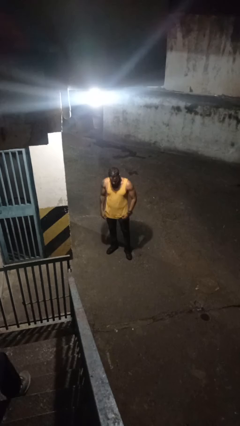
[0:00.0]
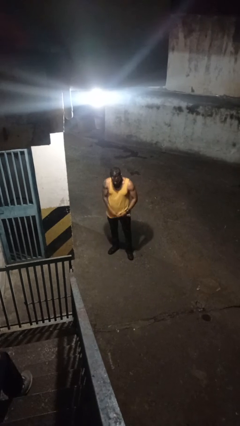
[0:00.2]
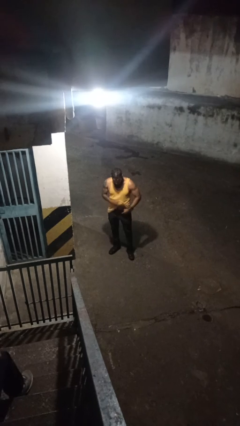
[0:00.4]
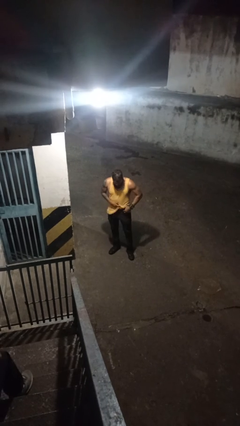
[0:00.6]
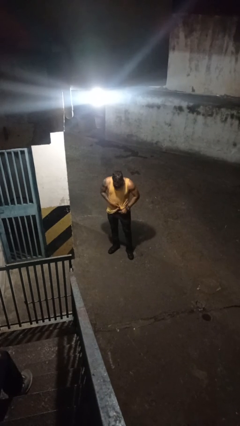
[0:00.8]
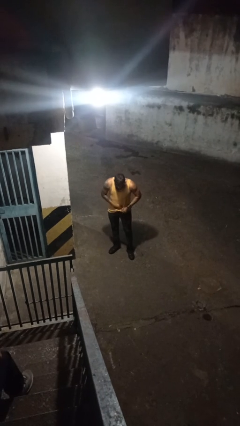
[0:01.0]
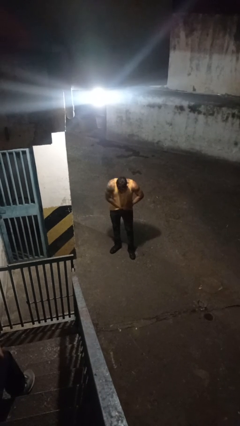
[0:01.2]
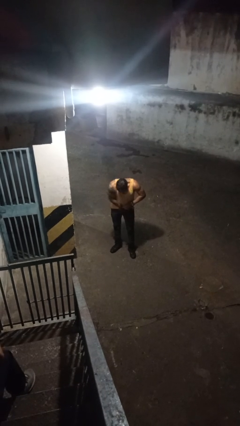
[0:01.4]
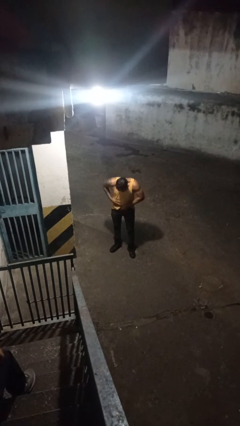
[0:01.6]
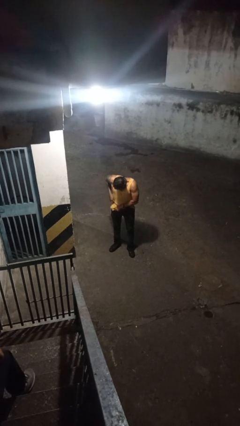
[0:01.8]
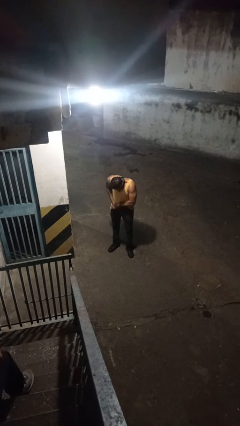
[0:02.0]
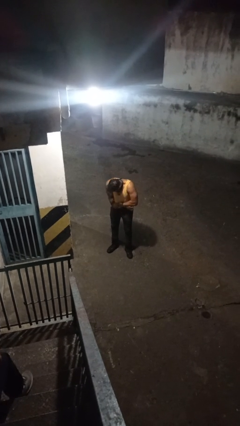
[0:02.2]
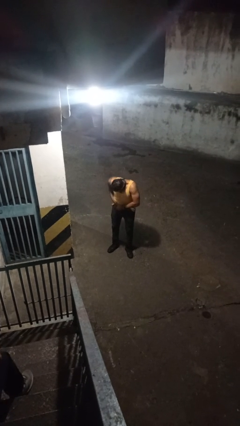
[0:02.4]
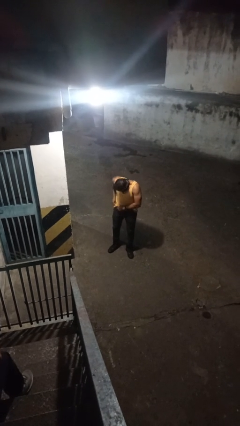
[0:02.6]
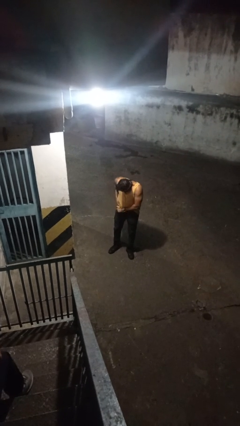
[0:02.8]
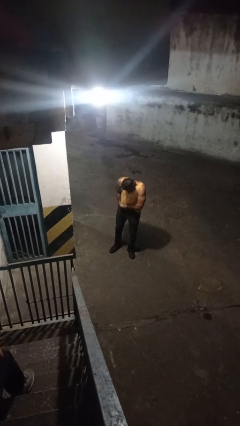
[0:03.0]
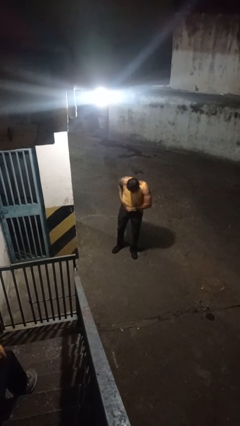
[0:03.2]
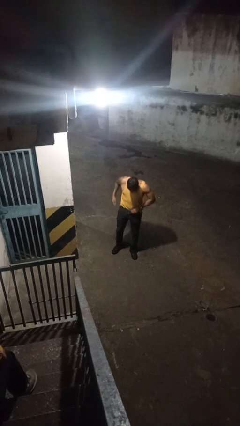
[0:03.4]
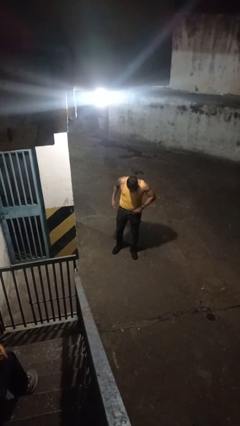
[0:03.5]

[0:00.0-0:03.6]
person tucks in shirt

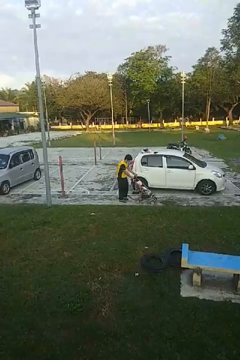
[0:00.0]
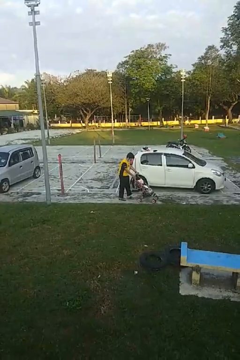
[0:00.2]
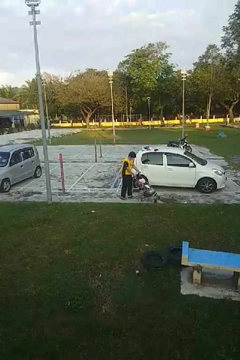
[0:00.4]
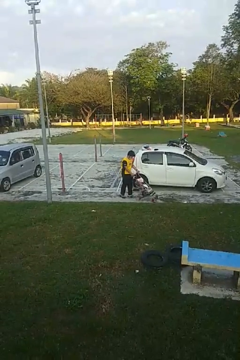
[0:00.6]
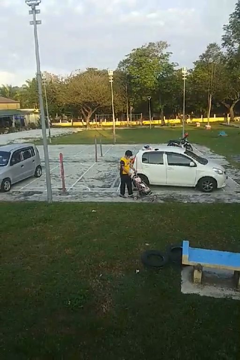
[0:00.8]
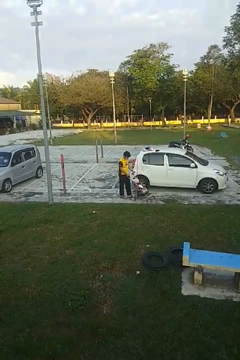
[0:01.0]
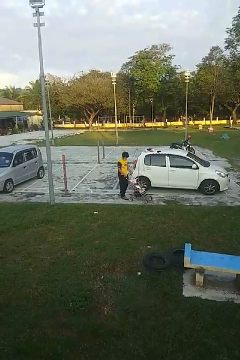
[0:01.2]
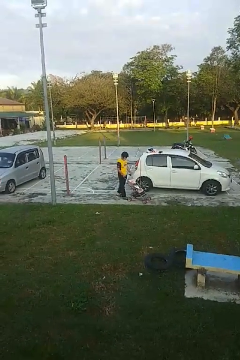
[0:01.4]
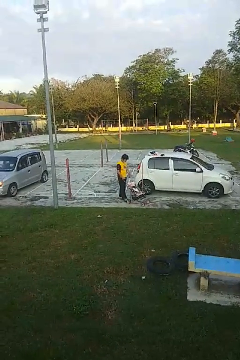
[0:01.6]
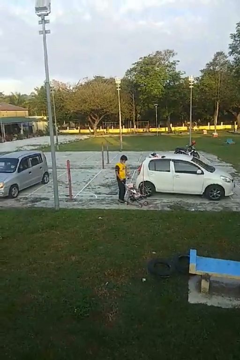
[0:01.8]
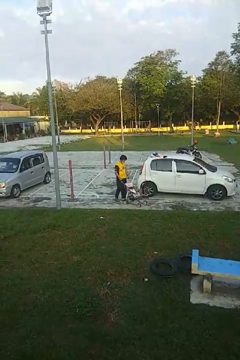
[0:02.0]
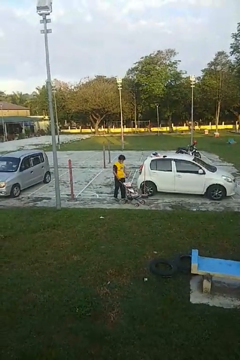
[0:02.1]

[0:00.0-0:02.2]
person pulls wheeled cart

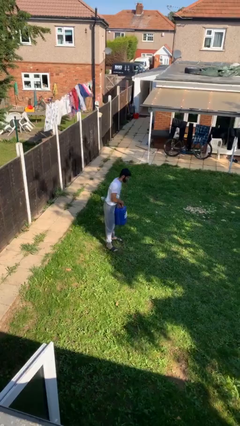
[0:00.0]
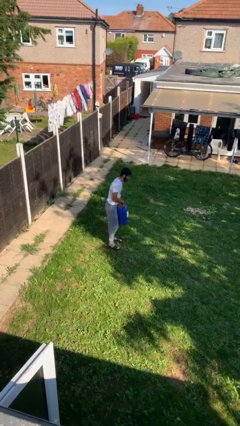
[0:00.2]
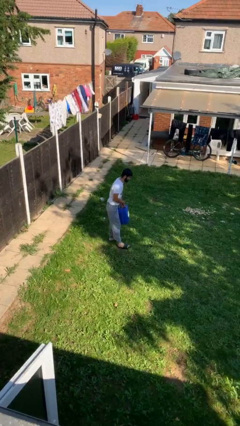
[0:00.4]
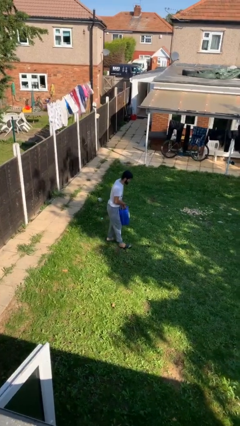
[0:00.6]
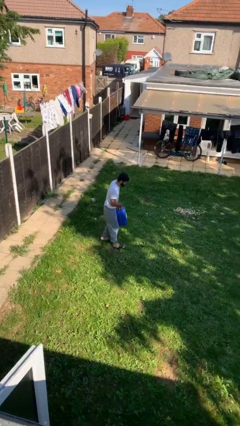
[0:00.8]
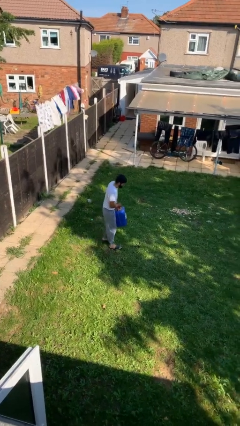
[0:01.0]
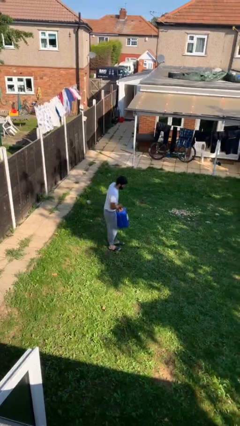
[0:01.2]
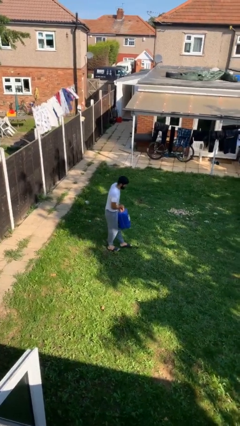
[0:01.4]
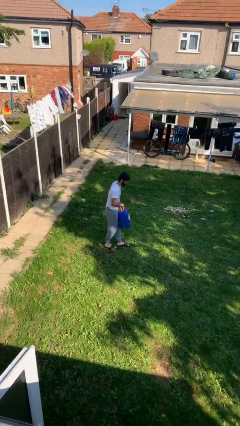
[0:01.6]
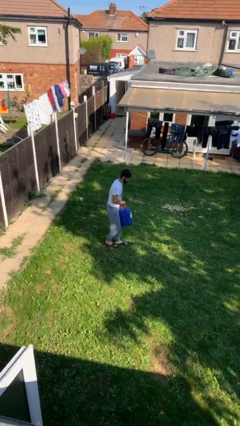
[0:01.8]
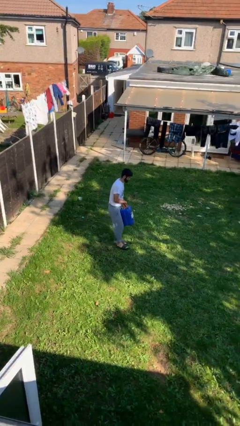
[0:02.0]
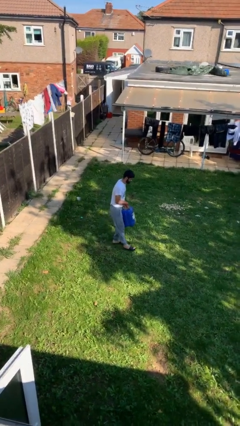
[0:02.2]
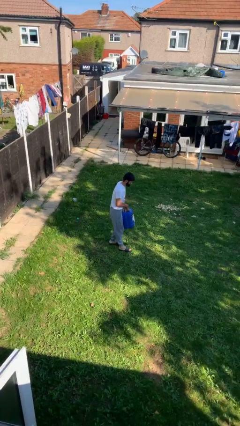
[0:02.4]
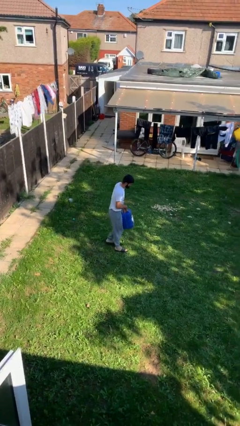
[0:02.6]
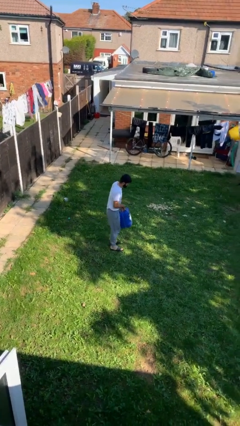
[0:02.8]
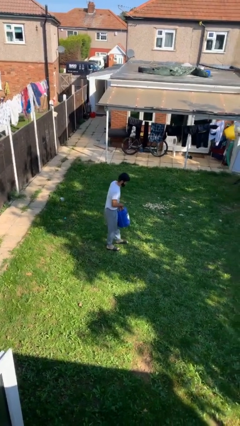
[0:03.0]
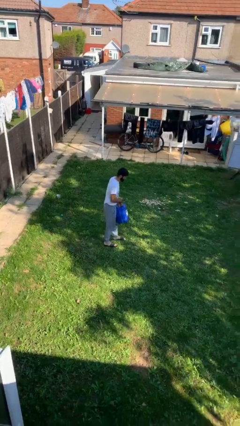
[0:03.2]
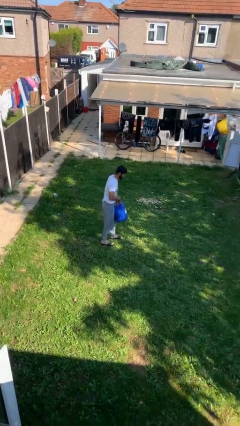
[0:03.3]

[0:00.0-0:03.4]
person carries heavy object

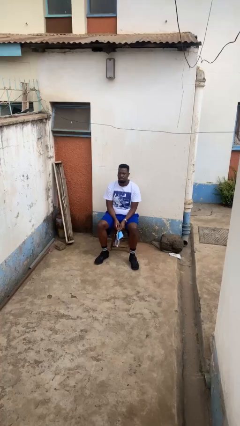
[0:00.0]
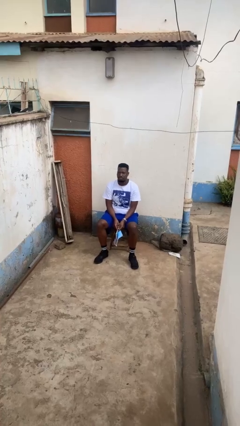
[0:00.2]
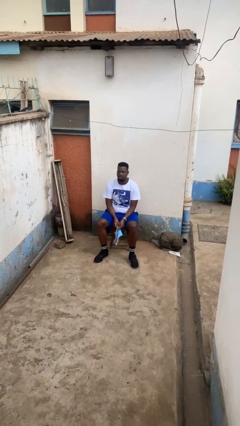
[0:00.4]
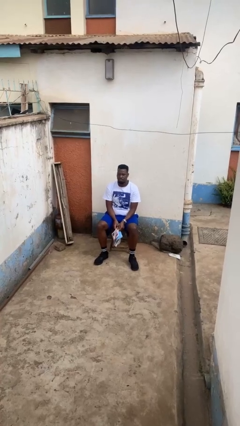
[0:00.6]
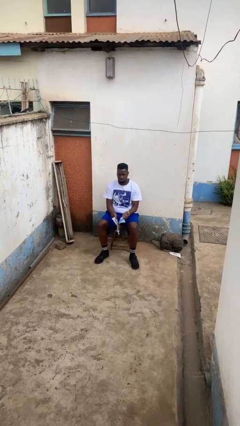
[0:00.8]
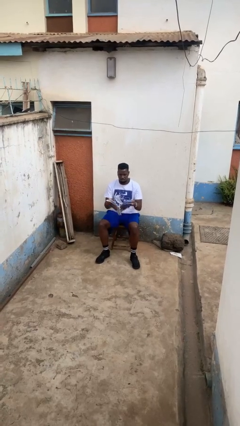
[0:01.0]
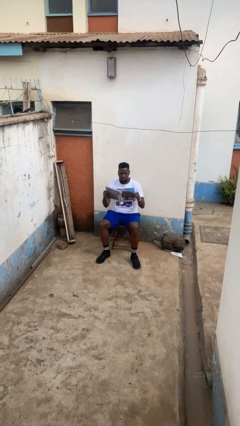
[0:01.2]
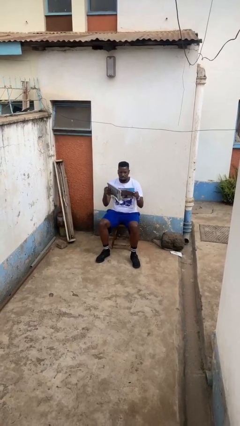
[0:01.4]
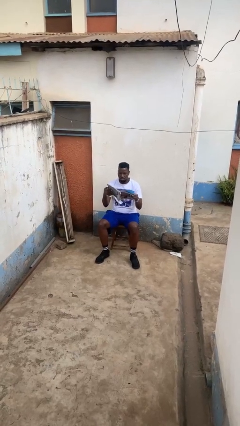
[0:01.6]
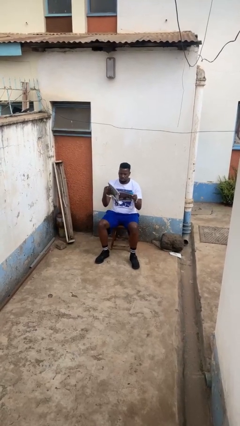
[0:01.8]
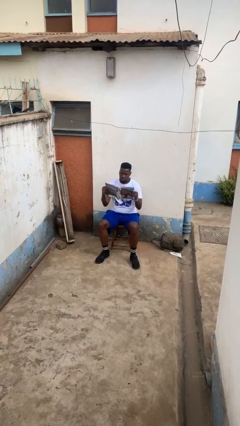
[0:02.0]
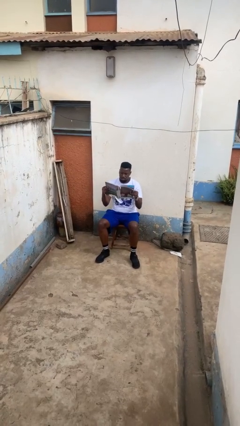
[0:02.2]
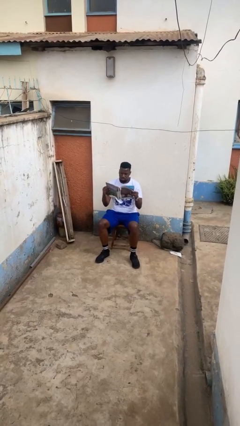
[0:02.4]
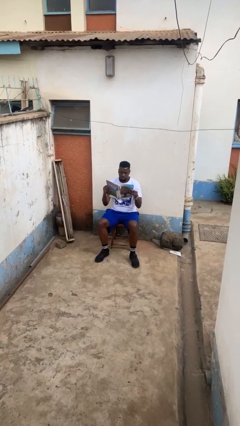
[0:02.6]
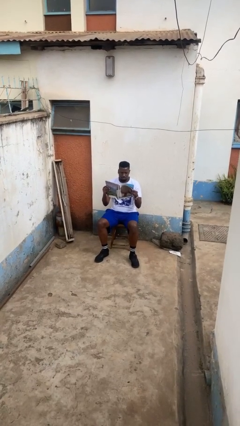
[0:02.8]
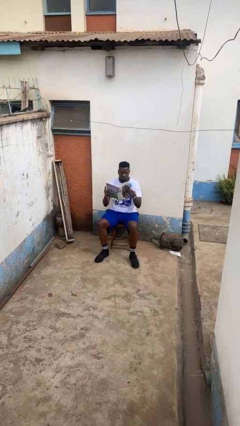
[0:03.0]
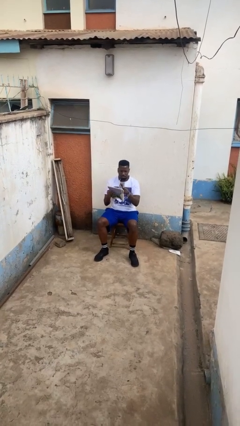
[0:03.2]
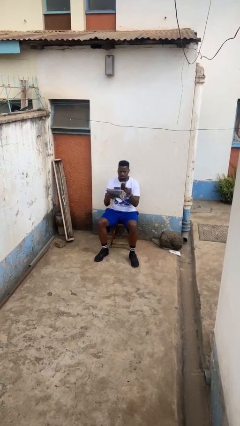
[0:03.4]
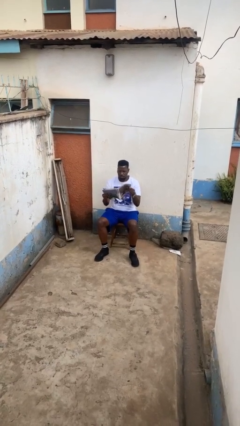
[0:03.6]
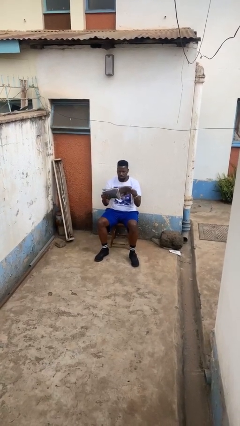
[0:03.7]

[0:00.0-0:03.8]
person reads magazine

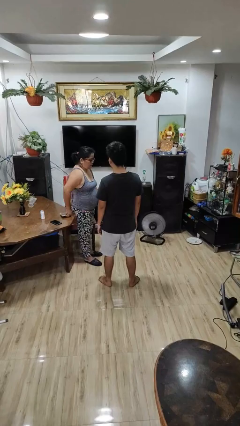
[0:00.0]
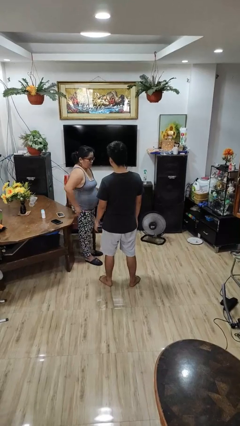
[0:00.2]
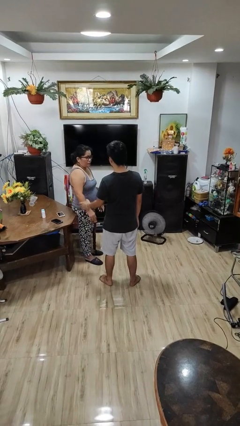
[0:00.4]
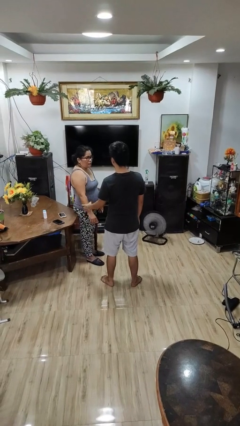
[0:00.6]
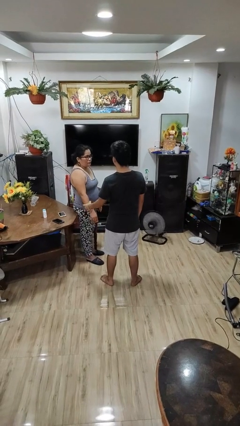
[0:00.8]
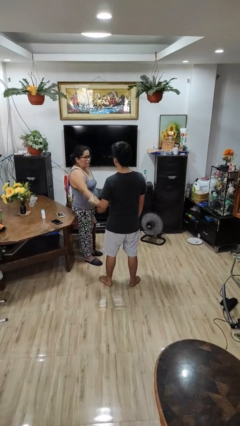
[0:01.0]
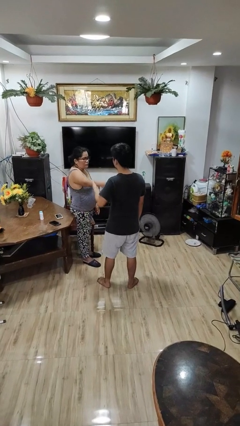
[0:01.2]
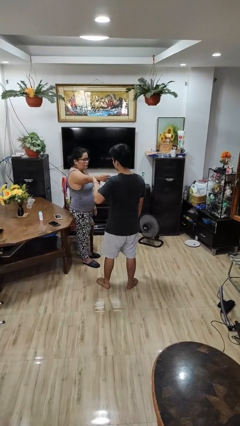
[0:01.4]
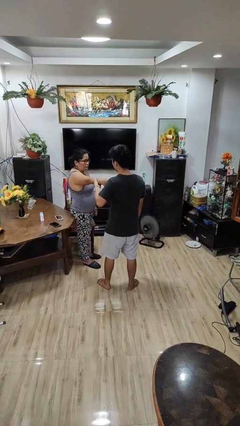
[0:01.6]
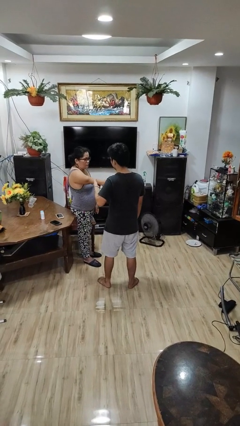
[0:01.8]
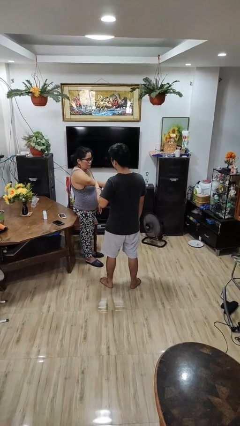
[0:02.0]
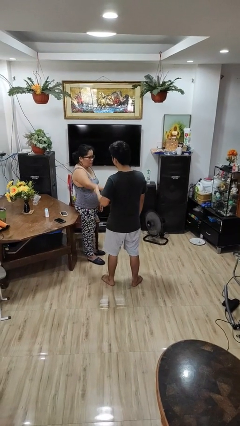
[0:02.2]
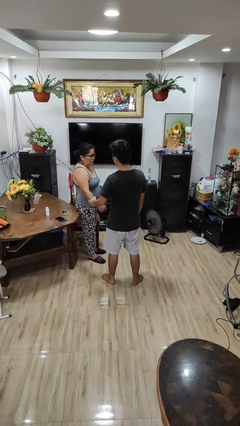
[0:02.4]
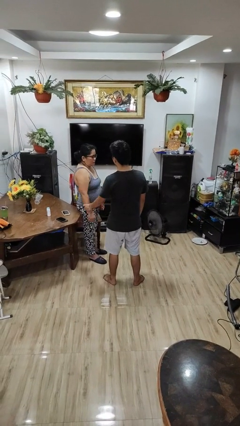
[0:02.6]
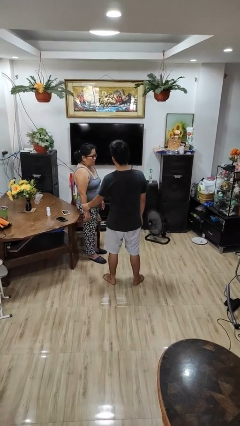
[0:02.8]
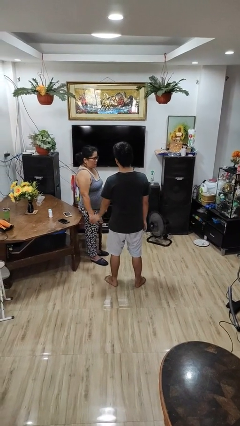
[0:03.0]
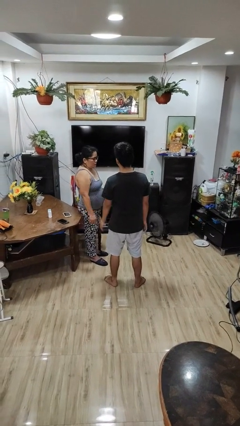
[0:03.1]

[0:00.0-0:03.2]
person grabs person by forearm

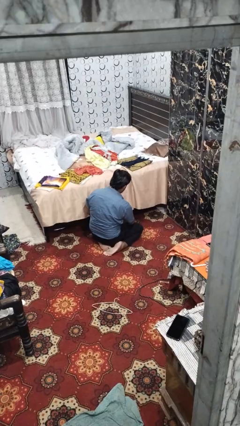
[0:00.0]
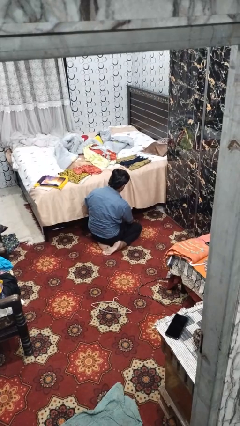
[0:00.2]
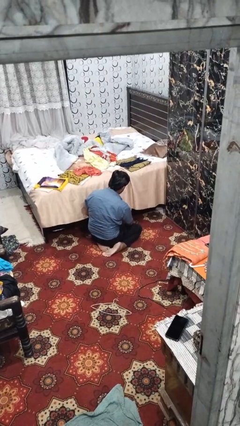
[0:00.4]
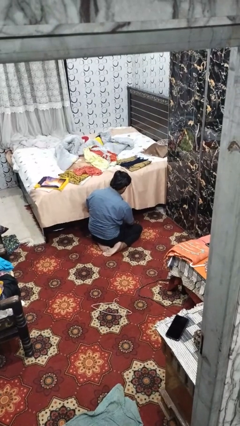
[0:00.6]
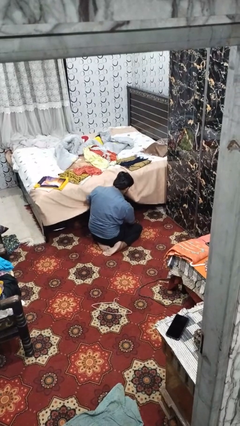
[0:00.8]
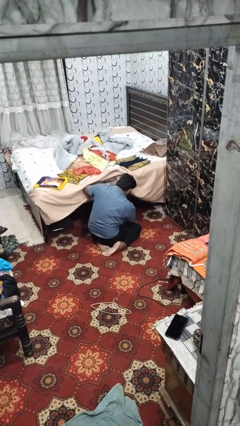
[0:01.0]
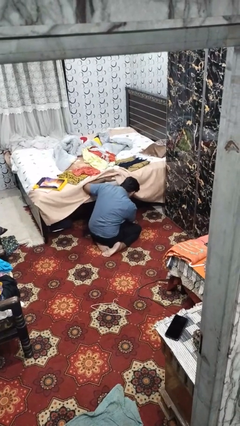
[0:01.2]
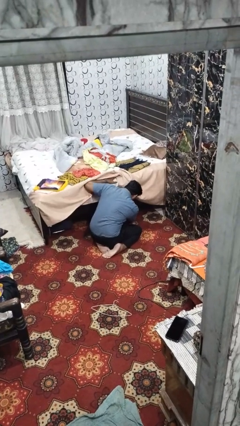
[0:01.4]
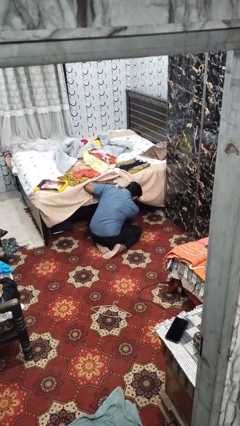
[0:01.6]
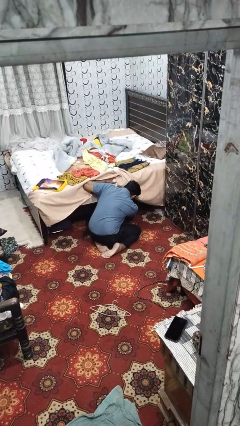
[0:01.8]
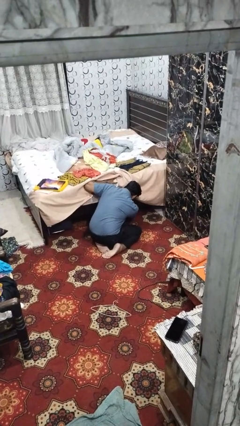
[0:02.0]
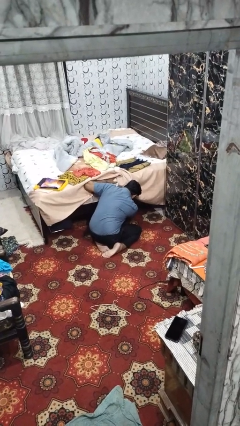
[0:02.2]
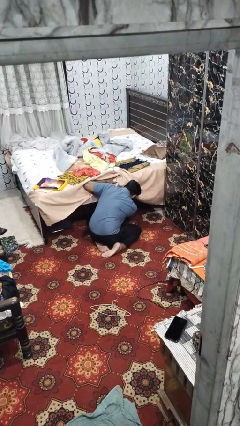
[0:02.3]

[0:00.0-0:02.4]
person searches under bed
